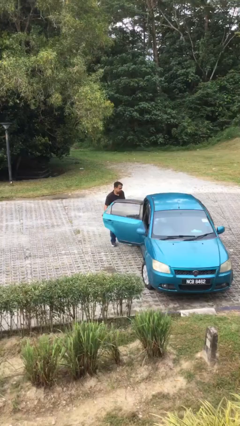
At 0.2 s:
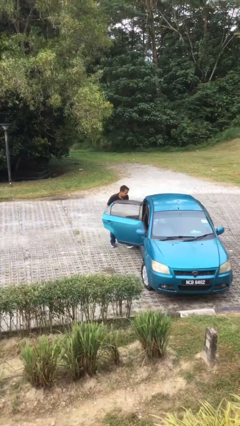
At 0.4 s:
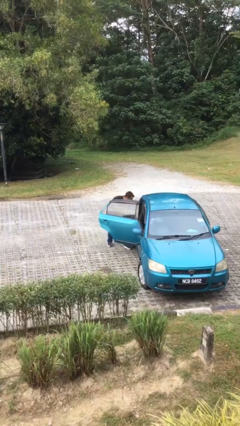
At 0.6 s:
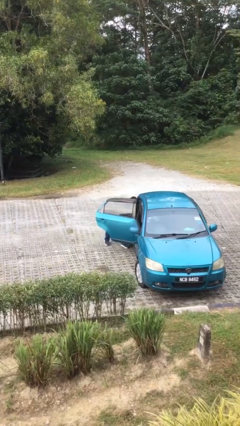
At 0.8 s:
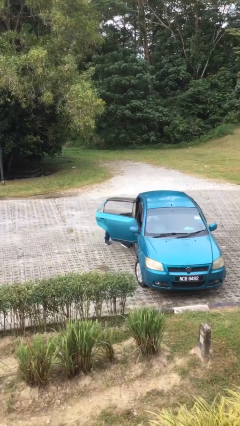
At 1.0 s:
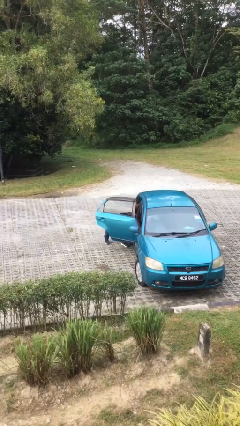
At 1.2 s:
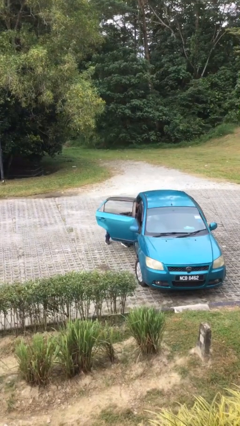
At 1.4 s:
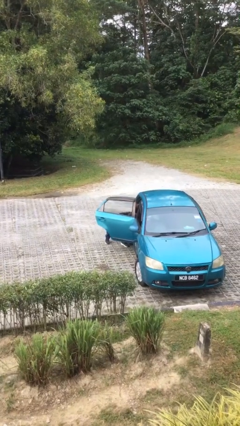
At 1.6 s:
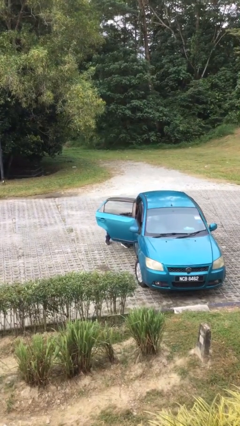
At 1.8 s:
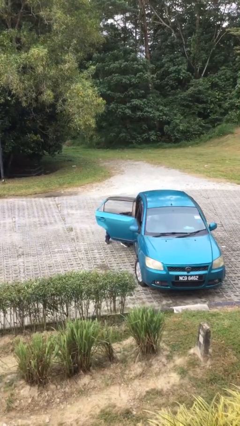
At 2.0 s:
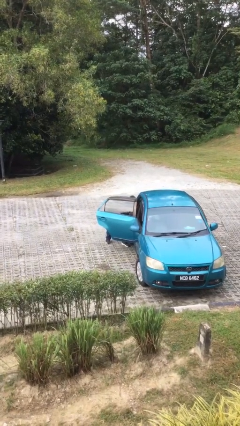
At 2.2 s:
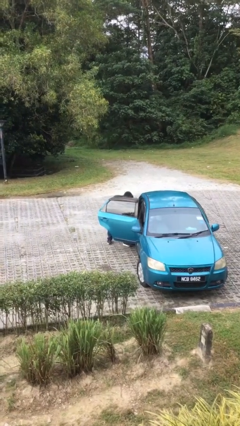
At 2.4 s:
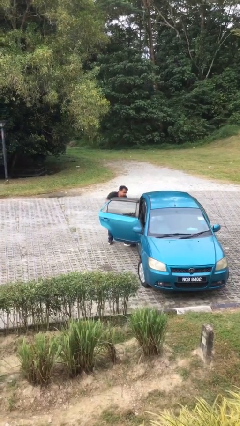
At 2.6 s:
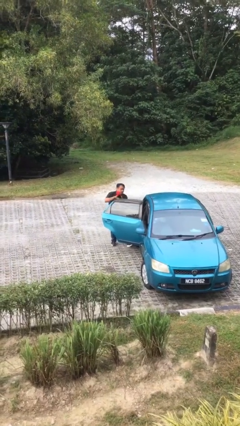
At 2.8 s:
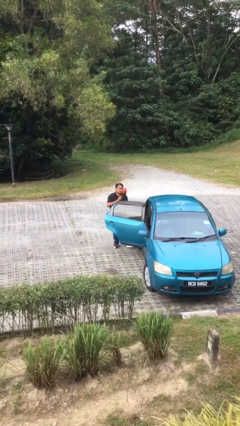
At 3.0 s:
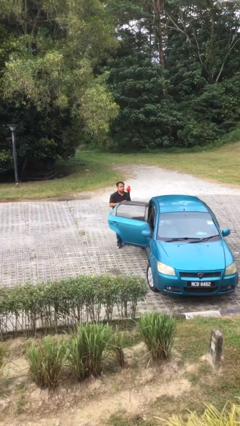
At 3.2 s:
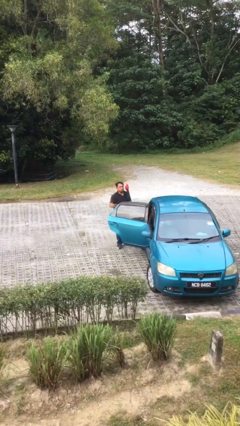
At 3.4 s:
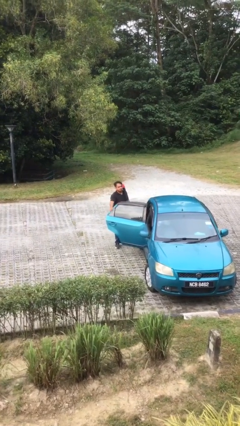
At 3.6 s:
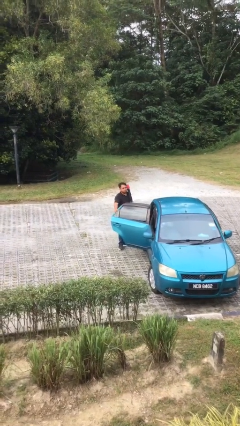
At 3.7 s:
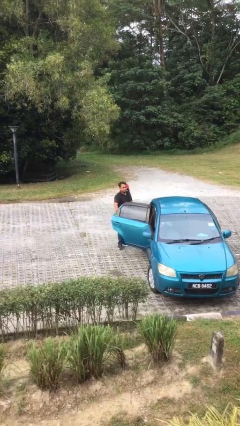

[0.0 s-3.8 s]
person unloads car

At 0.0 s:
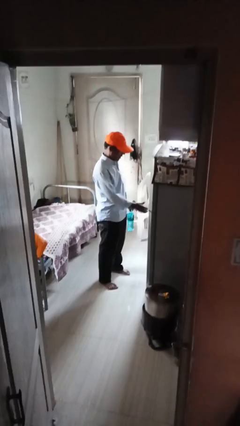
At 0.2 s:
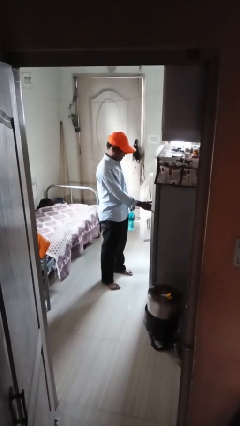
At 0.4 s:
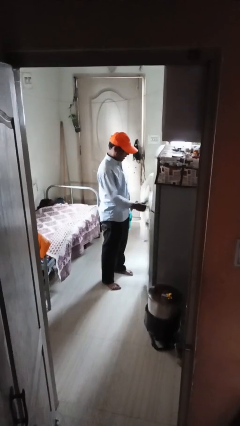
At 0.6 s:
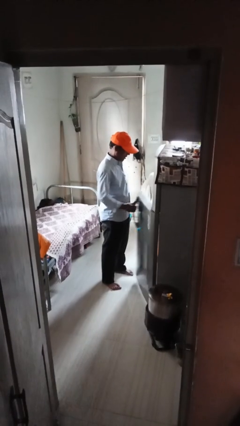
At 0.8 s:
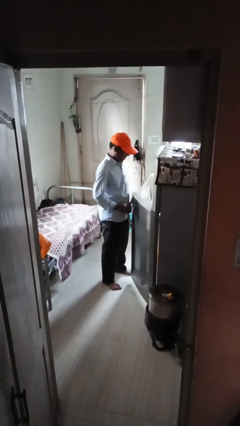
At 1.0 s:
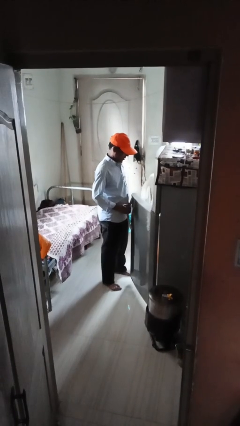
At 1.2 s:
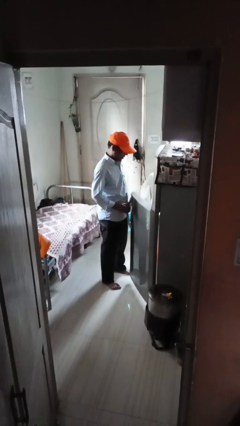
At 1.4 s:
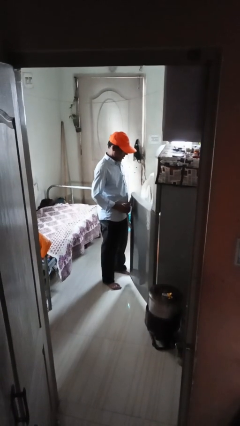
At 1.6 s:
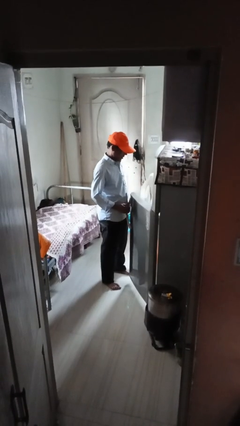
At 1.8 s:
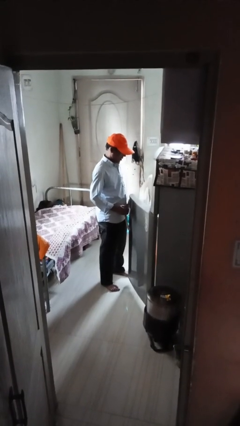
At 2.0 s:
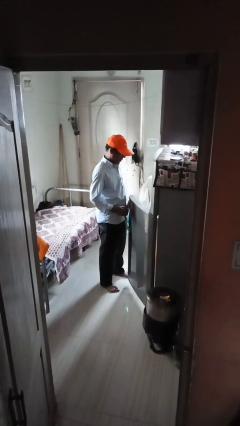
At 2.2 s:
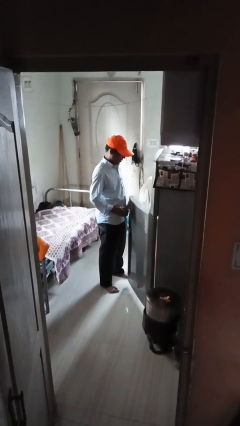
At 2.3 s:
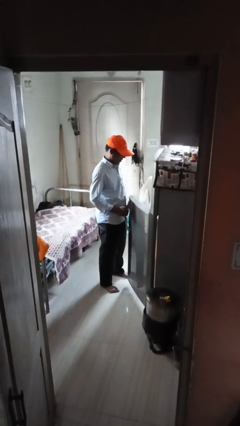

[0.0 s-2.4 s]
person opens refrigerator

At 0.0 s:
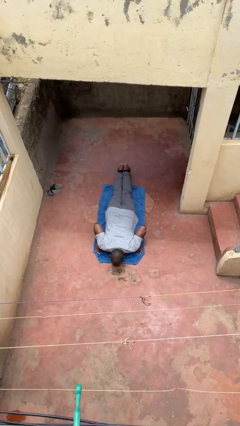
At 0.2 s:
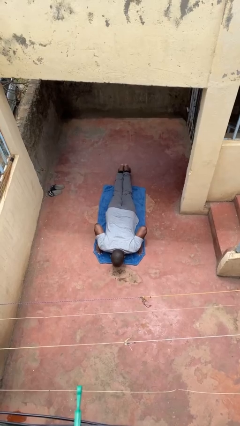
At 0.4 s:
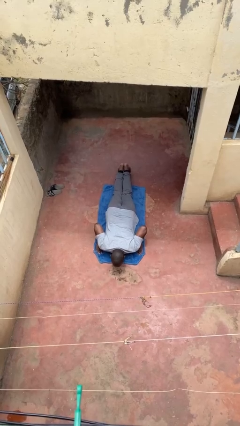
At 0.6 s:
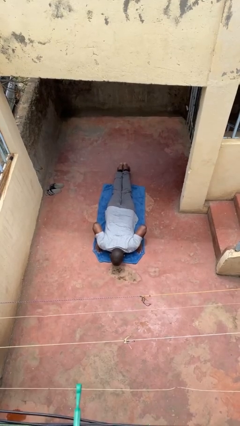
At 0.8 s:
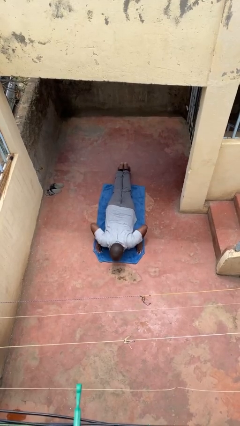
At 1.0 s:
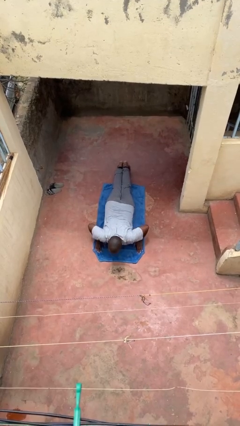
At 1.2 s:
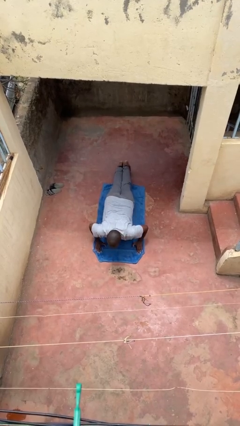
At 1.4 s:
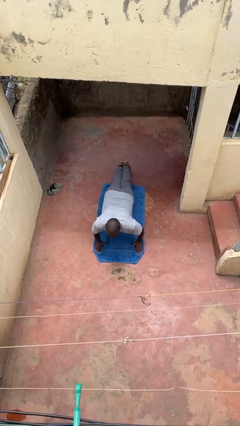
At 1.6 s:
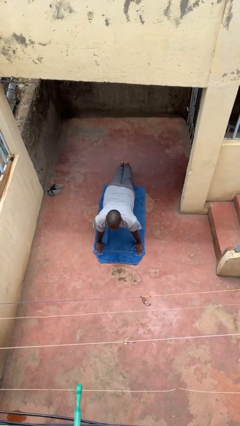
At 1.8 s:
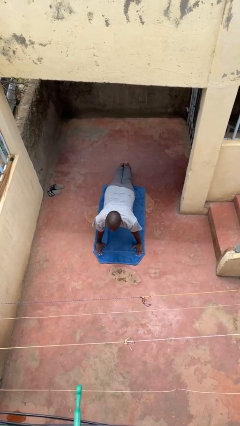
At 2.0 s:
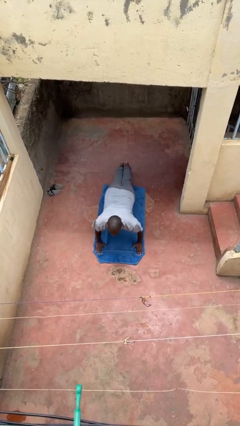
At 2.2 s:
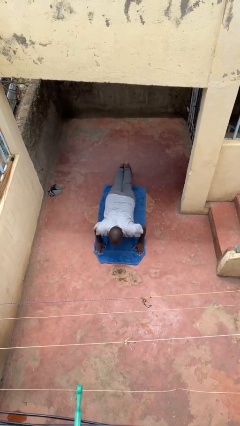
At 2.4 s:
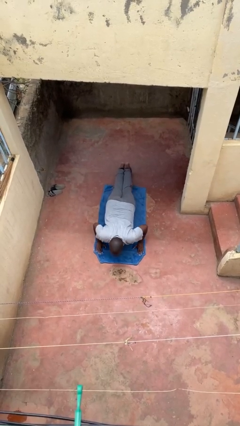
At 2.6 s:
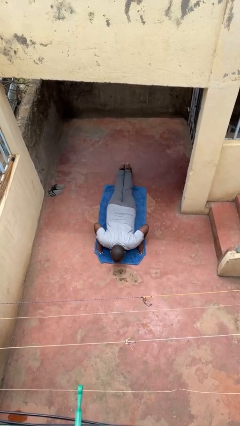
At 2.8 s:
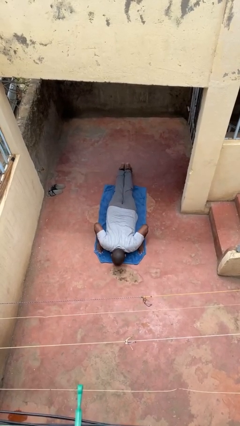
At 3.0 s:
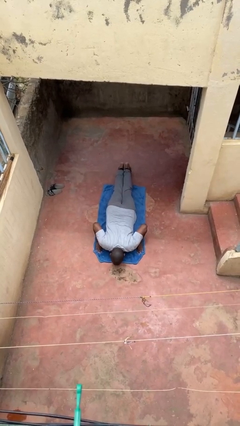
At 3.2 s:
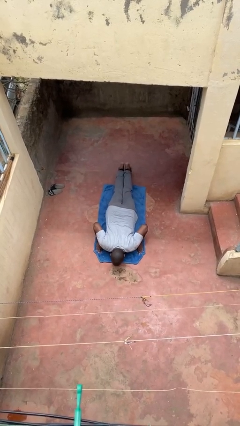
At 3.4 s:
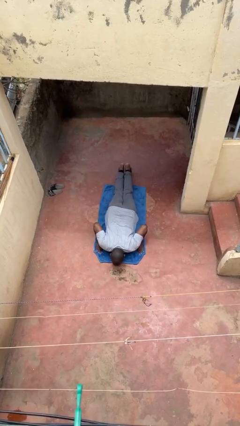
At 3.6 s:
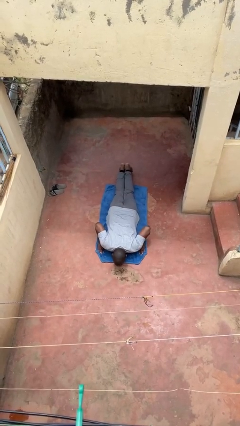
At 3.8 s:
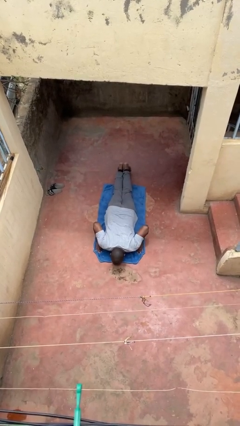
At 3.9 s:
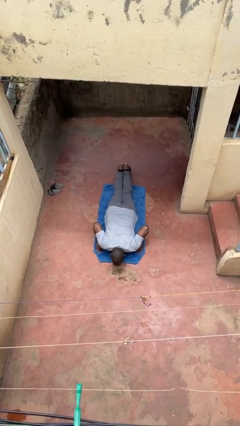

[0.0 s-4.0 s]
person exercises with pushup

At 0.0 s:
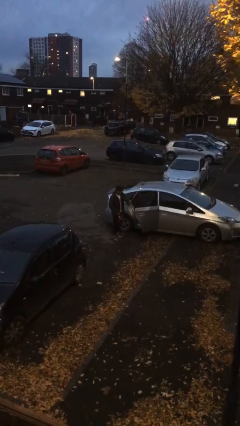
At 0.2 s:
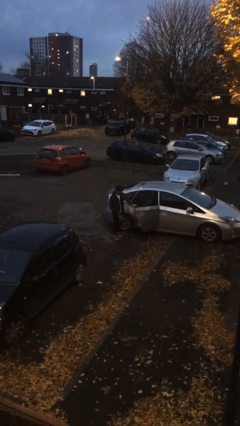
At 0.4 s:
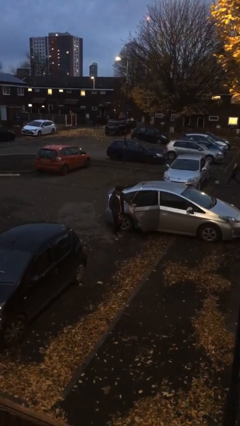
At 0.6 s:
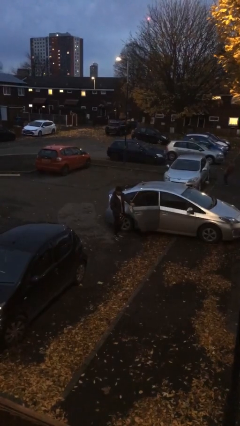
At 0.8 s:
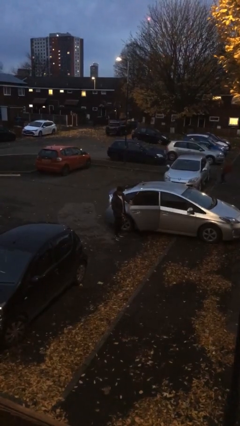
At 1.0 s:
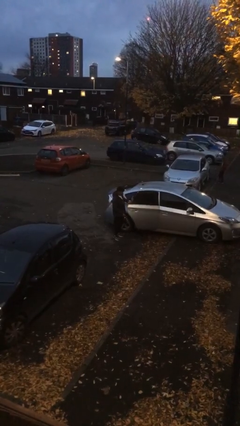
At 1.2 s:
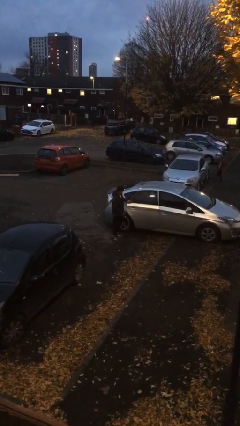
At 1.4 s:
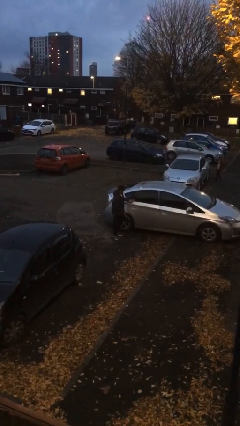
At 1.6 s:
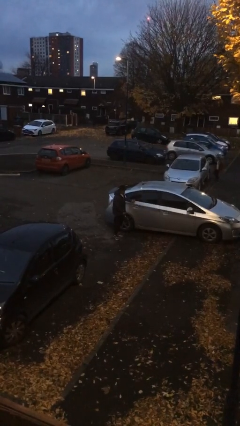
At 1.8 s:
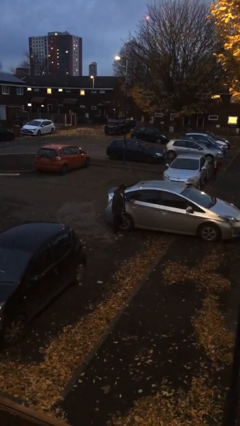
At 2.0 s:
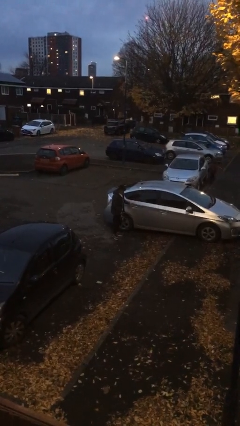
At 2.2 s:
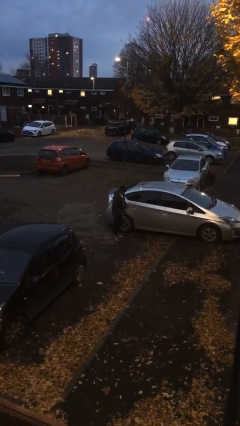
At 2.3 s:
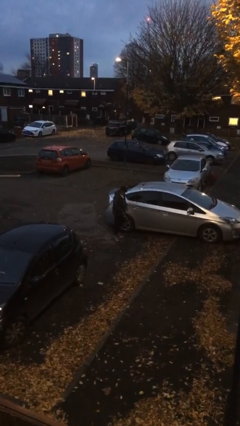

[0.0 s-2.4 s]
person closes car door

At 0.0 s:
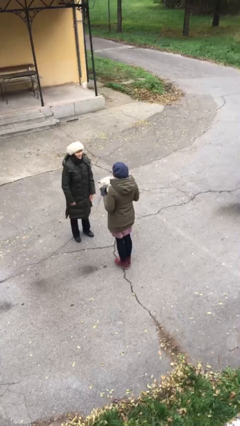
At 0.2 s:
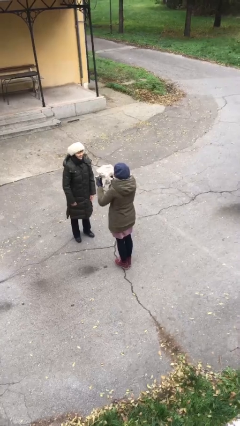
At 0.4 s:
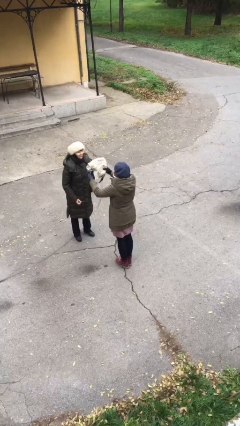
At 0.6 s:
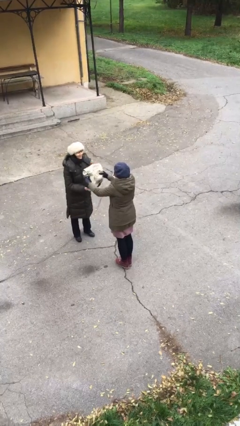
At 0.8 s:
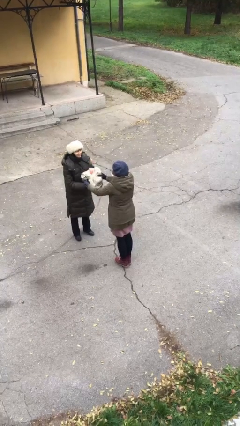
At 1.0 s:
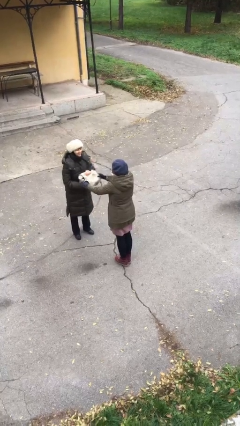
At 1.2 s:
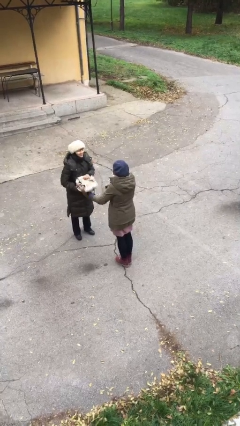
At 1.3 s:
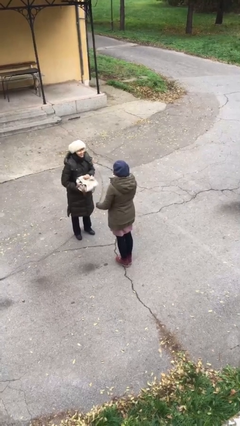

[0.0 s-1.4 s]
person transfers object to person

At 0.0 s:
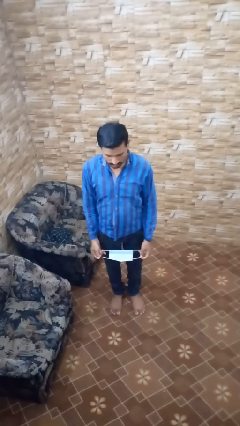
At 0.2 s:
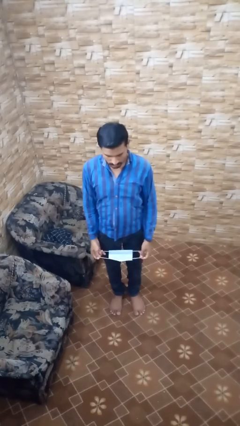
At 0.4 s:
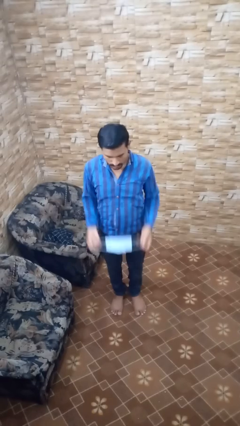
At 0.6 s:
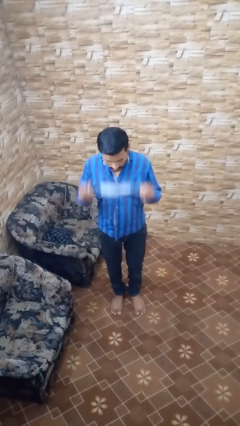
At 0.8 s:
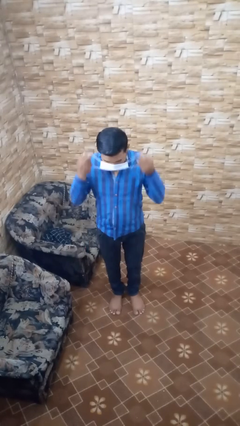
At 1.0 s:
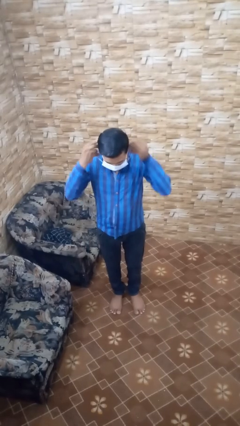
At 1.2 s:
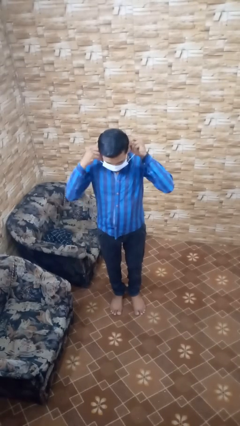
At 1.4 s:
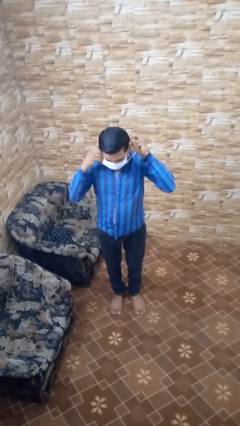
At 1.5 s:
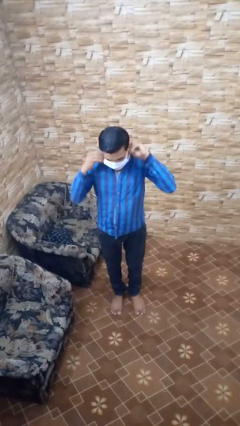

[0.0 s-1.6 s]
person puts on facemask

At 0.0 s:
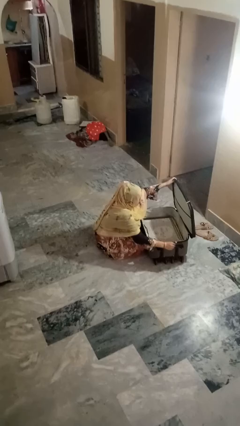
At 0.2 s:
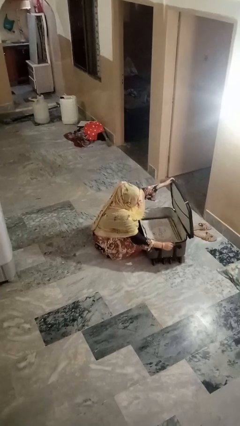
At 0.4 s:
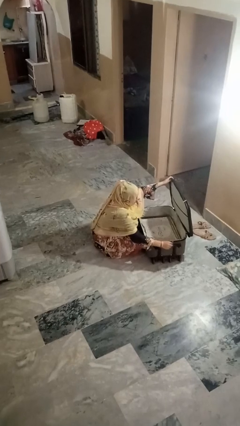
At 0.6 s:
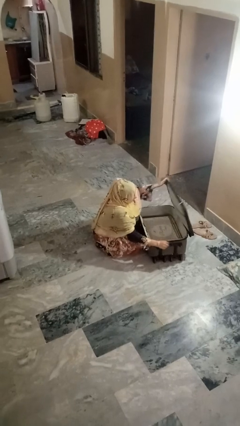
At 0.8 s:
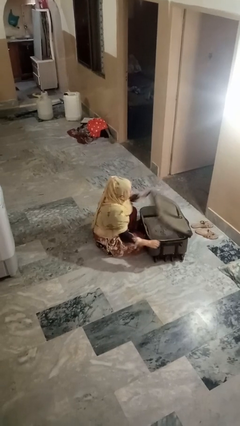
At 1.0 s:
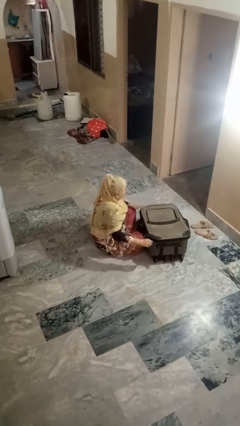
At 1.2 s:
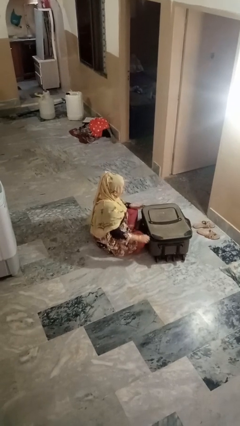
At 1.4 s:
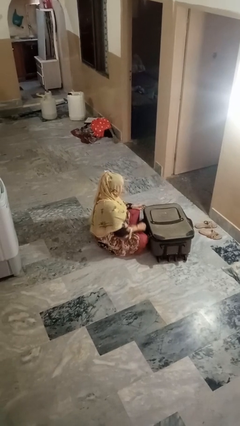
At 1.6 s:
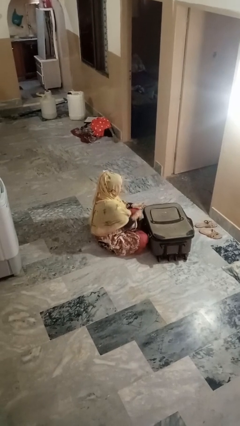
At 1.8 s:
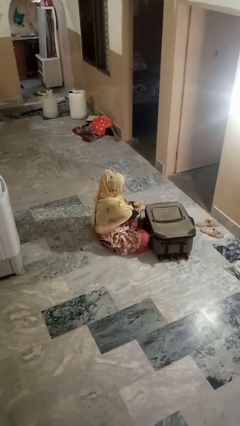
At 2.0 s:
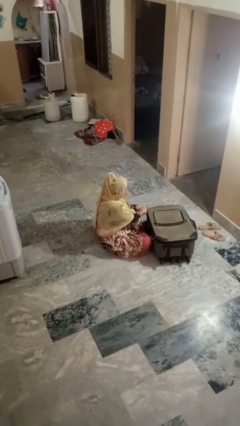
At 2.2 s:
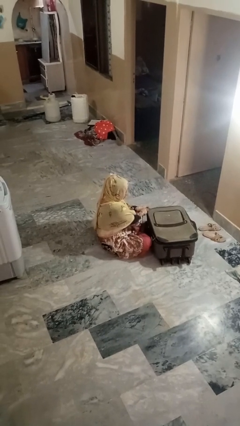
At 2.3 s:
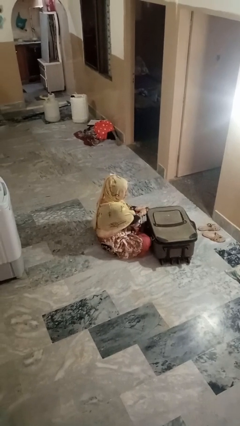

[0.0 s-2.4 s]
person closes suitcase
